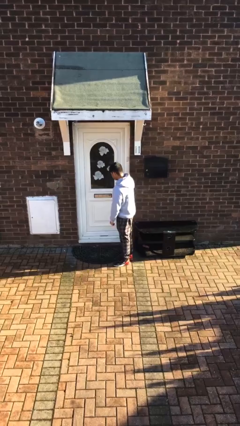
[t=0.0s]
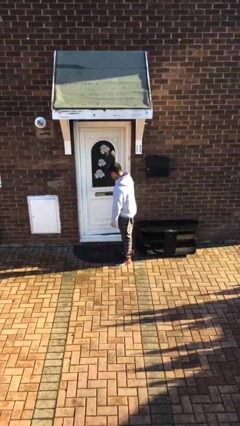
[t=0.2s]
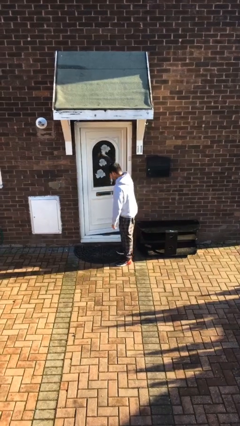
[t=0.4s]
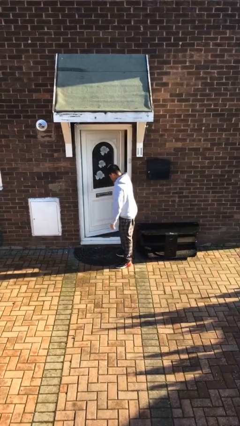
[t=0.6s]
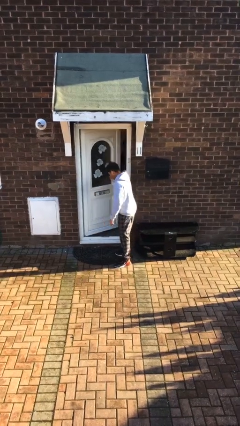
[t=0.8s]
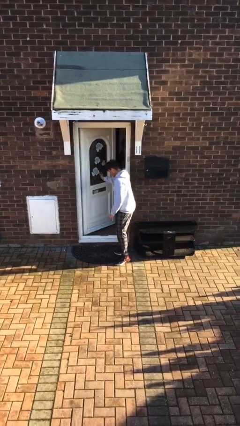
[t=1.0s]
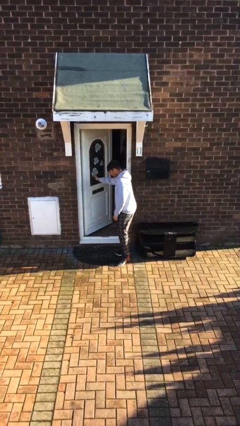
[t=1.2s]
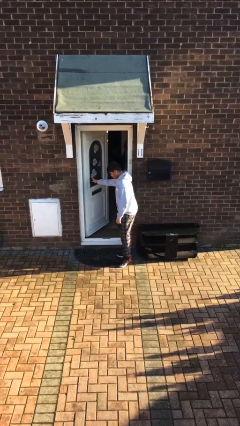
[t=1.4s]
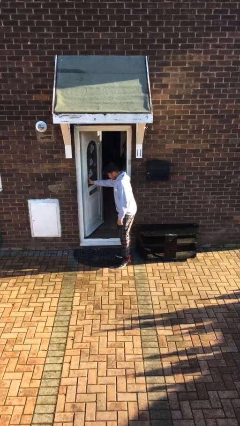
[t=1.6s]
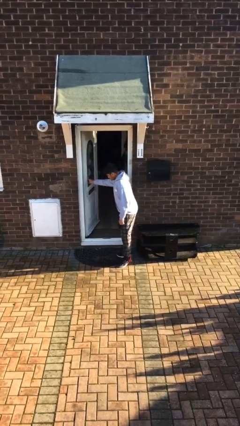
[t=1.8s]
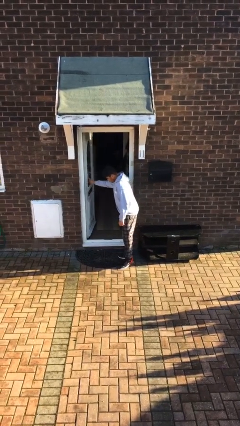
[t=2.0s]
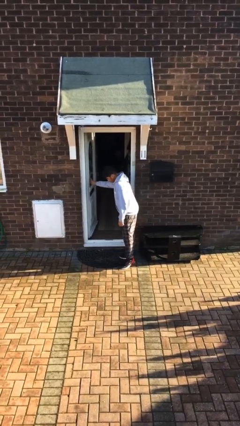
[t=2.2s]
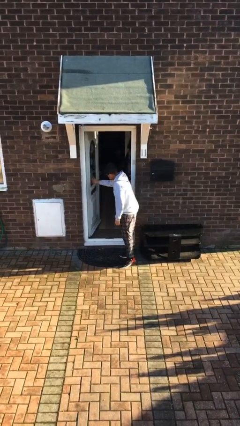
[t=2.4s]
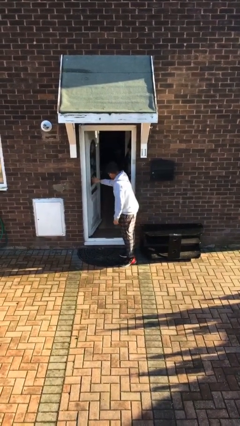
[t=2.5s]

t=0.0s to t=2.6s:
person opens facility door

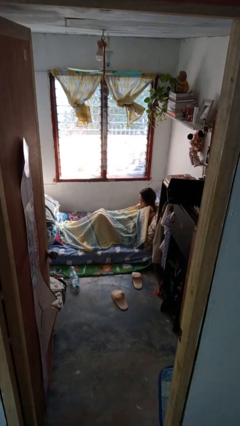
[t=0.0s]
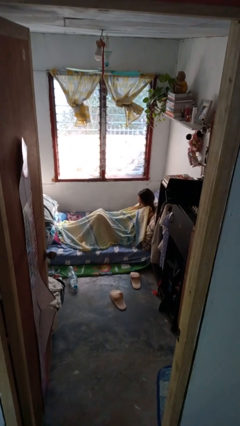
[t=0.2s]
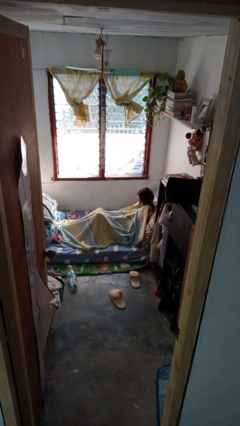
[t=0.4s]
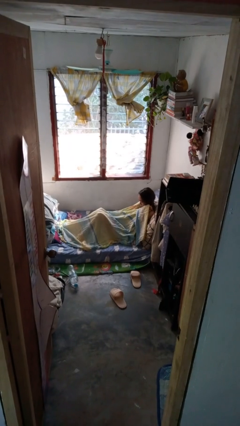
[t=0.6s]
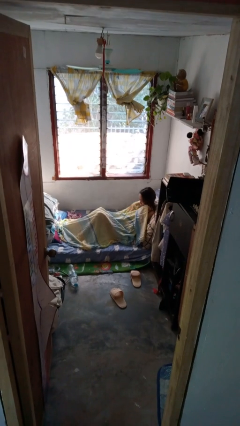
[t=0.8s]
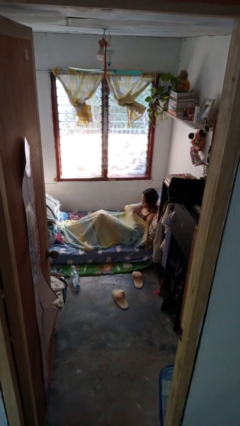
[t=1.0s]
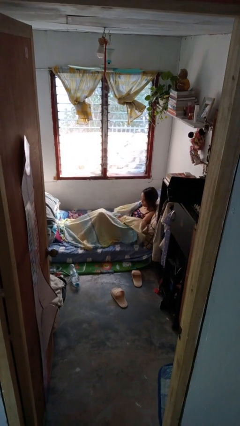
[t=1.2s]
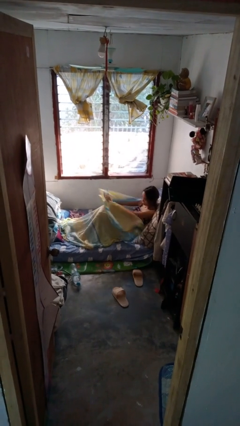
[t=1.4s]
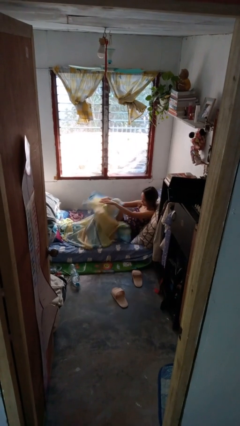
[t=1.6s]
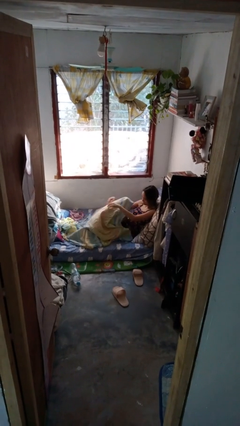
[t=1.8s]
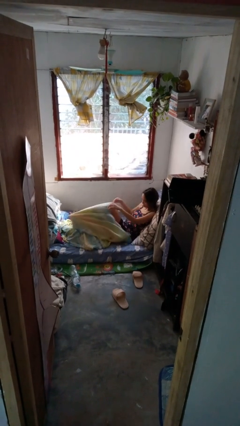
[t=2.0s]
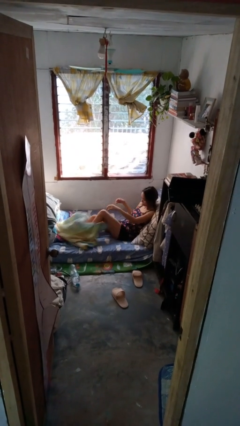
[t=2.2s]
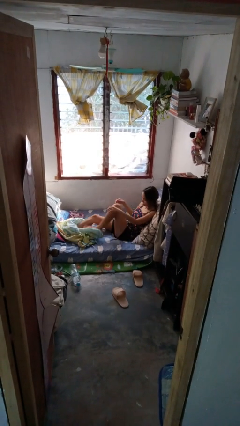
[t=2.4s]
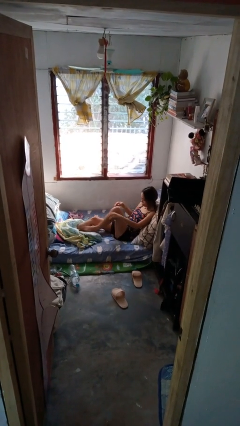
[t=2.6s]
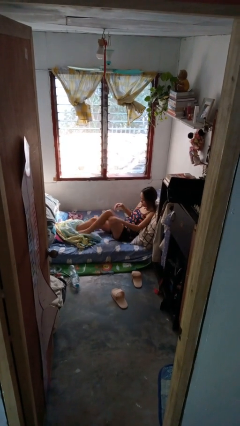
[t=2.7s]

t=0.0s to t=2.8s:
person uncovers with bedsheets

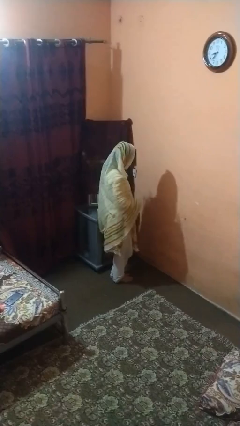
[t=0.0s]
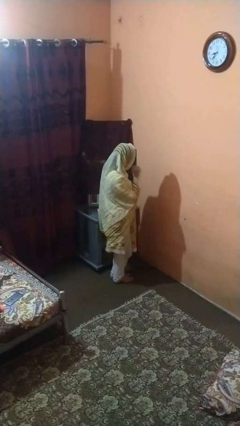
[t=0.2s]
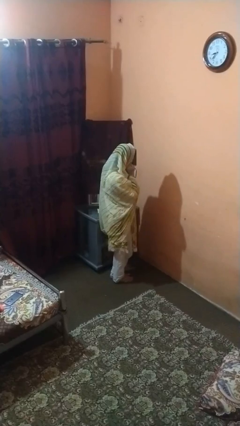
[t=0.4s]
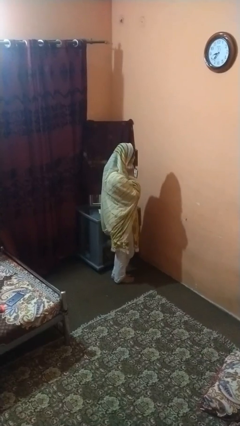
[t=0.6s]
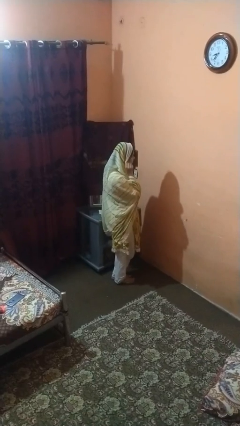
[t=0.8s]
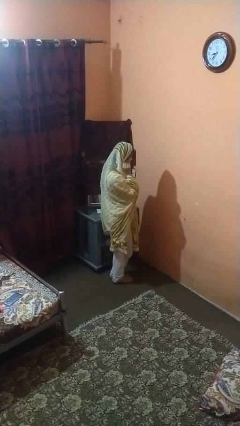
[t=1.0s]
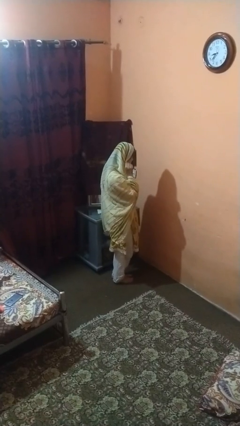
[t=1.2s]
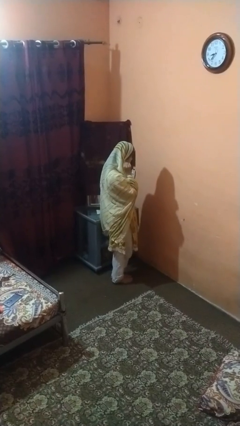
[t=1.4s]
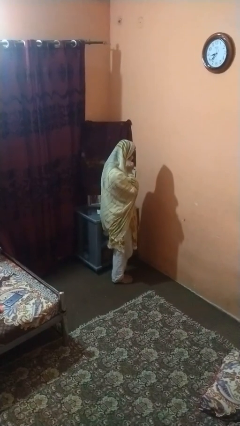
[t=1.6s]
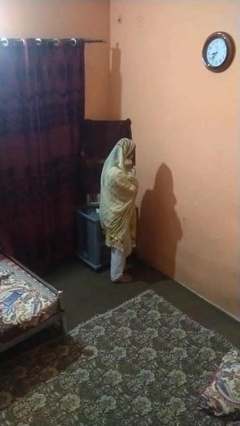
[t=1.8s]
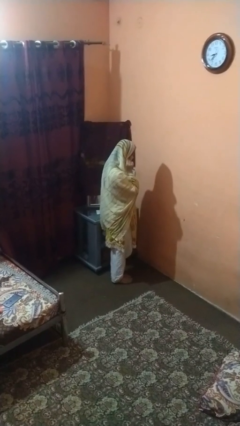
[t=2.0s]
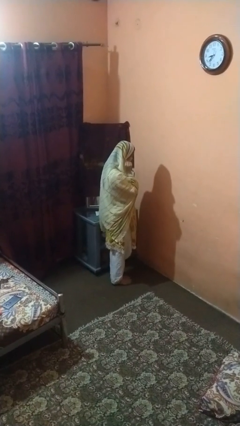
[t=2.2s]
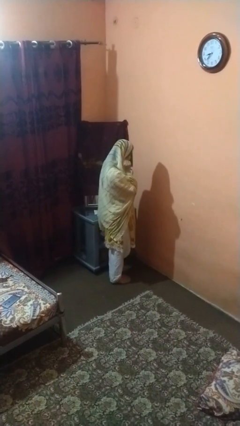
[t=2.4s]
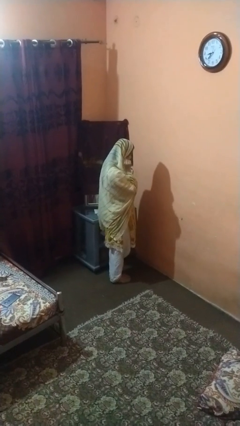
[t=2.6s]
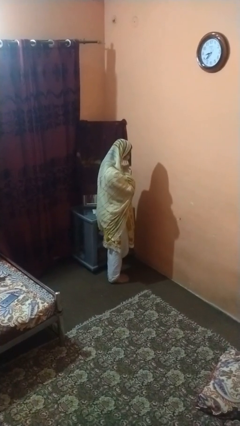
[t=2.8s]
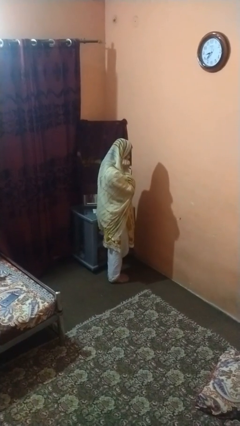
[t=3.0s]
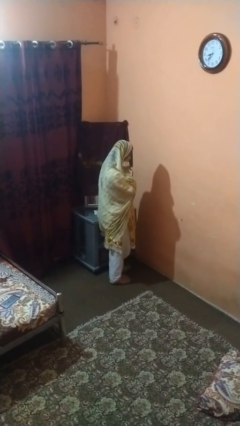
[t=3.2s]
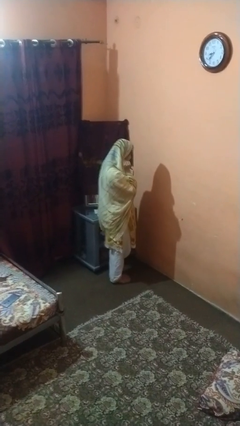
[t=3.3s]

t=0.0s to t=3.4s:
person touches earlobe

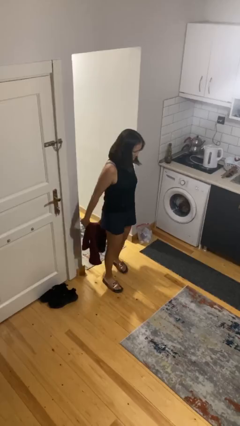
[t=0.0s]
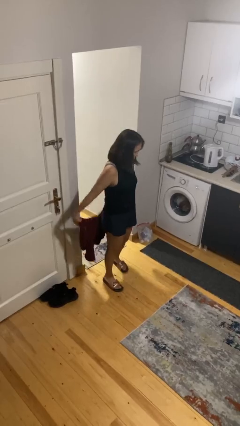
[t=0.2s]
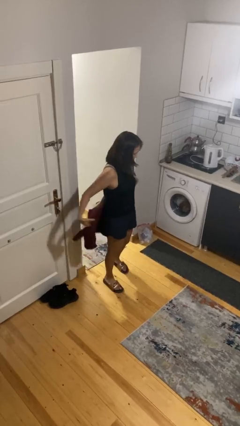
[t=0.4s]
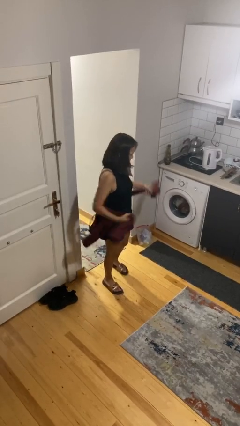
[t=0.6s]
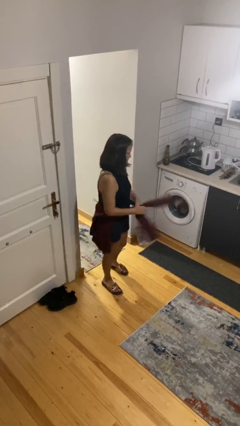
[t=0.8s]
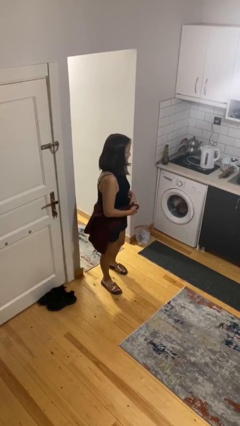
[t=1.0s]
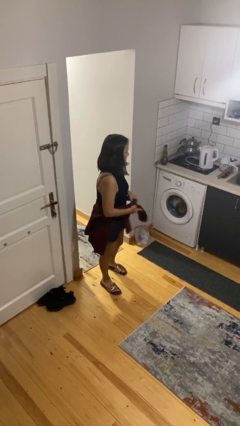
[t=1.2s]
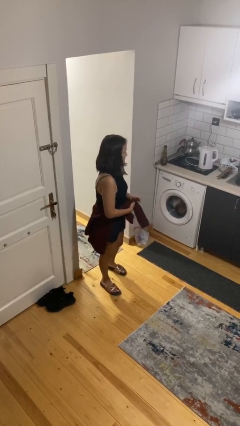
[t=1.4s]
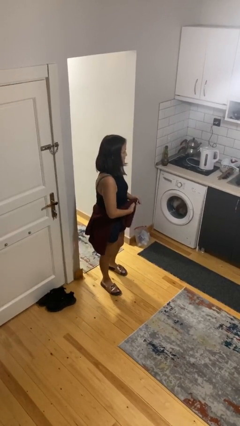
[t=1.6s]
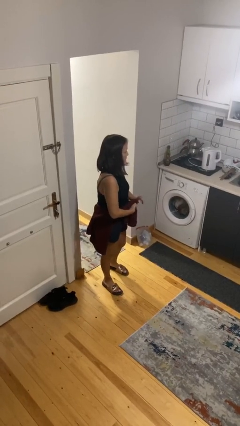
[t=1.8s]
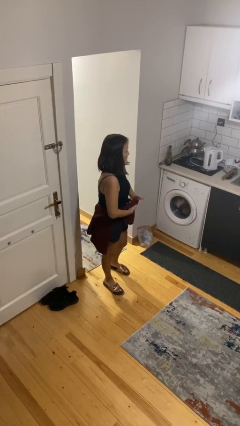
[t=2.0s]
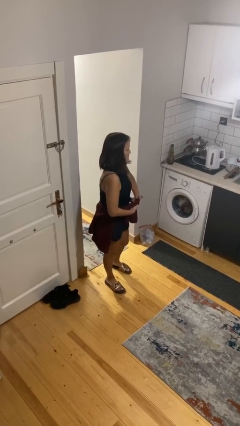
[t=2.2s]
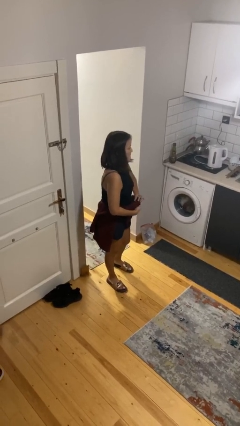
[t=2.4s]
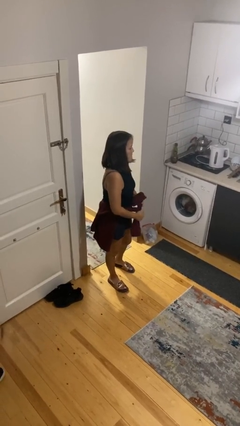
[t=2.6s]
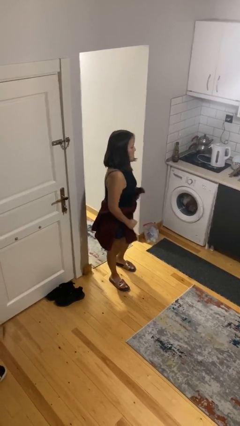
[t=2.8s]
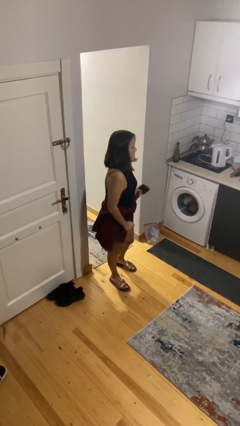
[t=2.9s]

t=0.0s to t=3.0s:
person ties jacket around waist

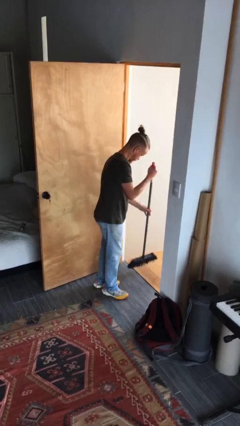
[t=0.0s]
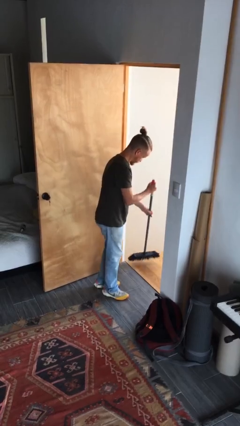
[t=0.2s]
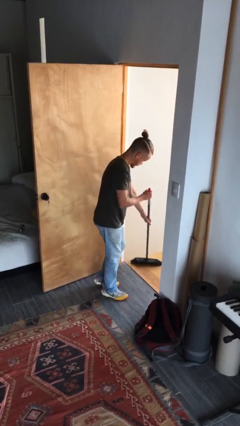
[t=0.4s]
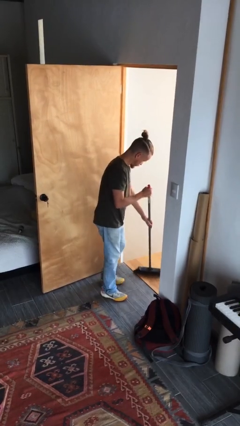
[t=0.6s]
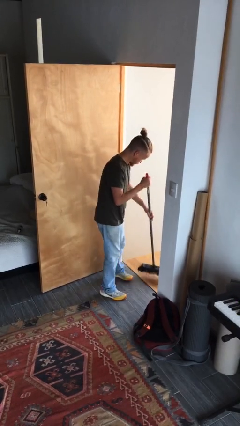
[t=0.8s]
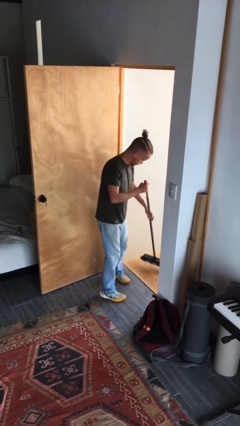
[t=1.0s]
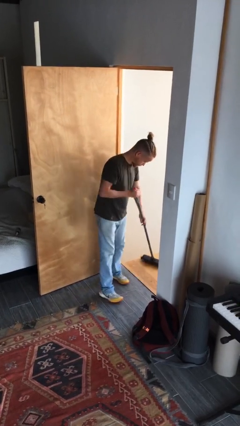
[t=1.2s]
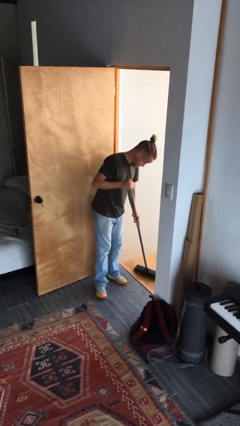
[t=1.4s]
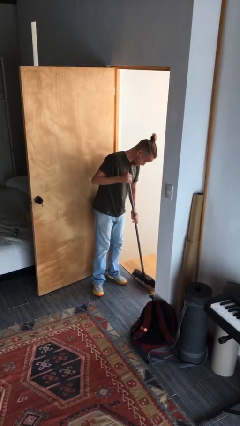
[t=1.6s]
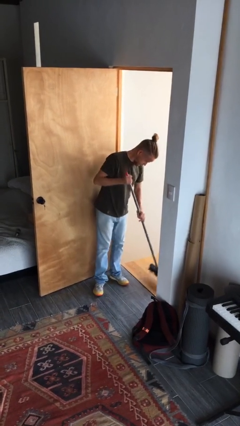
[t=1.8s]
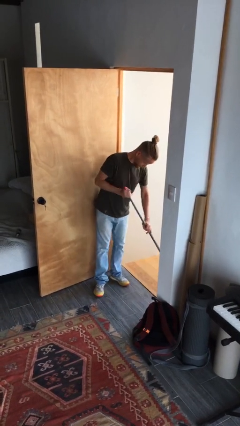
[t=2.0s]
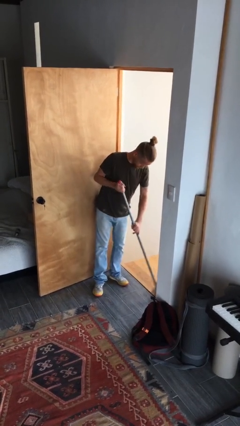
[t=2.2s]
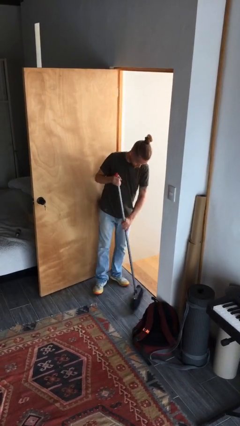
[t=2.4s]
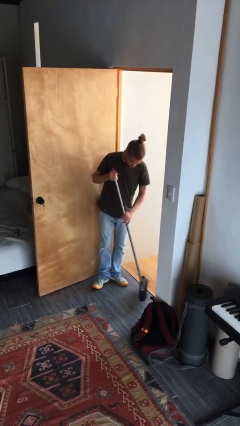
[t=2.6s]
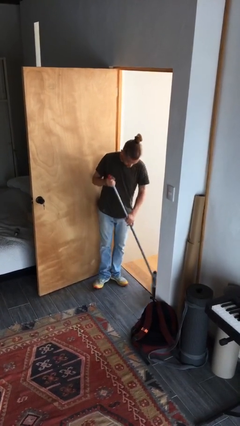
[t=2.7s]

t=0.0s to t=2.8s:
person sweeps floor

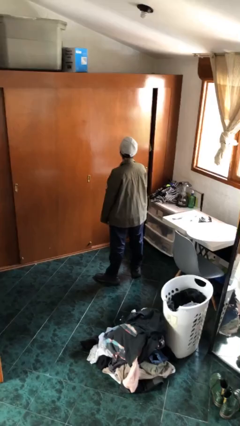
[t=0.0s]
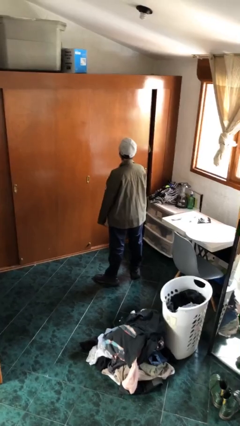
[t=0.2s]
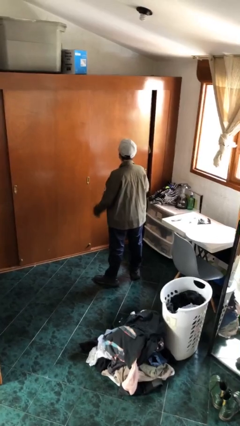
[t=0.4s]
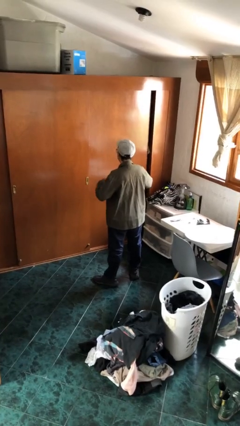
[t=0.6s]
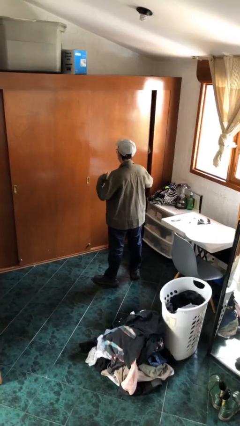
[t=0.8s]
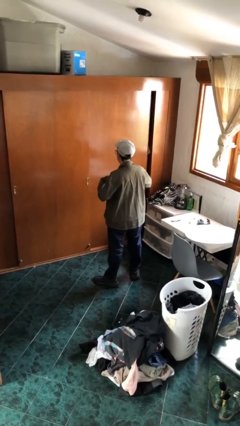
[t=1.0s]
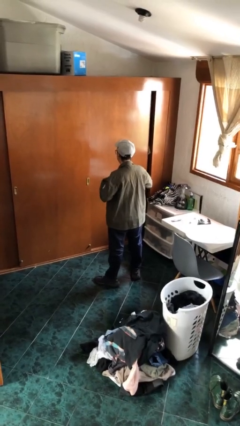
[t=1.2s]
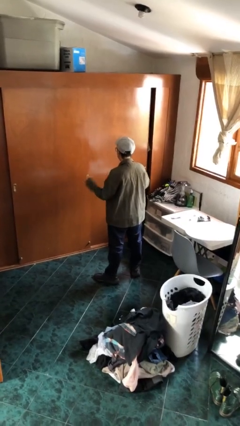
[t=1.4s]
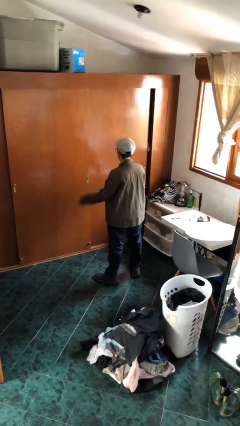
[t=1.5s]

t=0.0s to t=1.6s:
person drums on chest

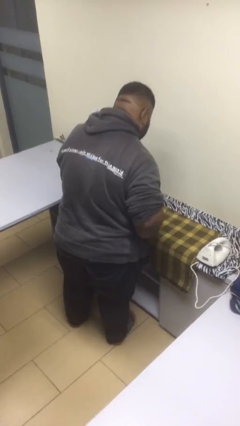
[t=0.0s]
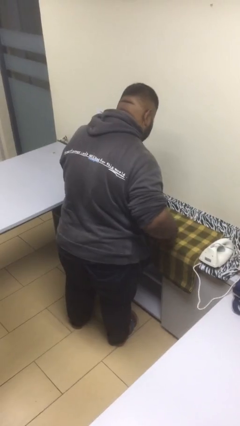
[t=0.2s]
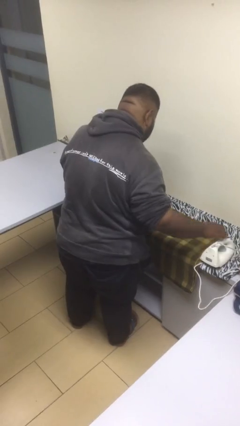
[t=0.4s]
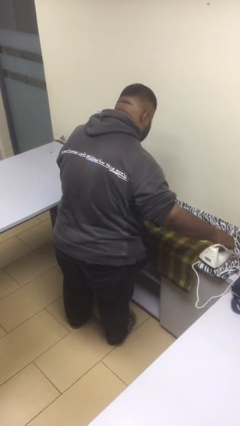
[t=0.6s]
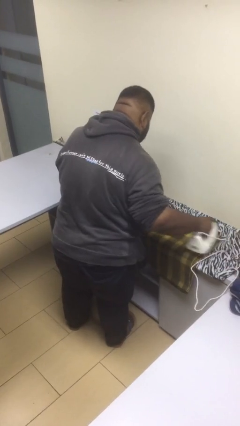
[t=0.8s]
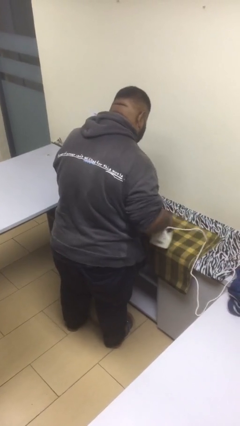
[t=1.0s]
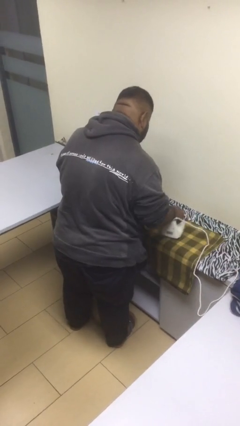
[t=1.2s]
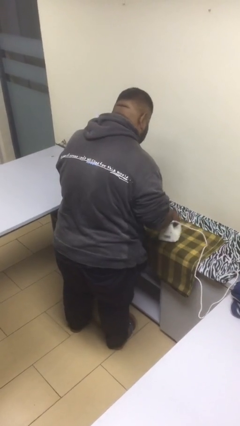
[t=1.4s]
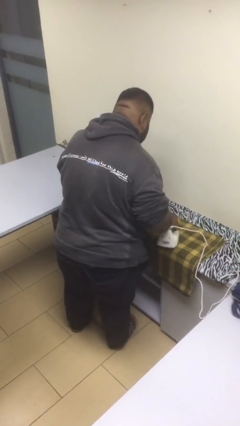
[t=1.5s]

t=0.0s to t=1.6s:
person irons clothes
